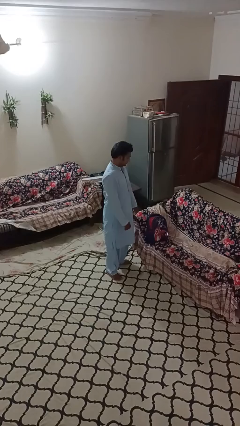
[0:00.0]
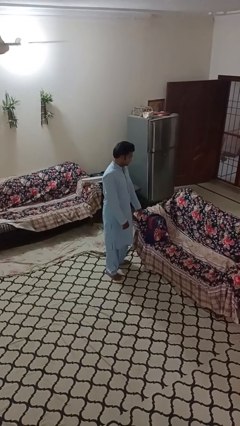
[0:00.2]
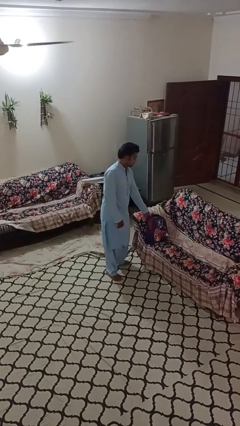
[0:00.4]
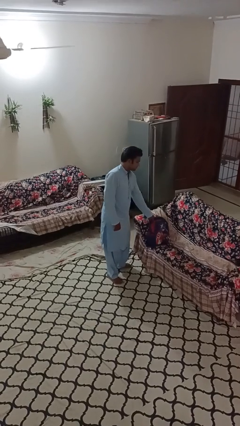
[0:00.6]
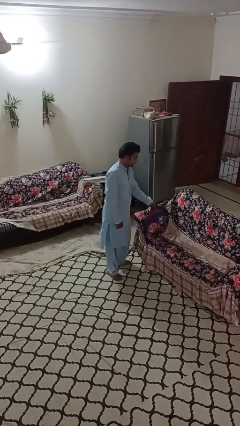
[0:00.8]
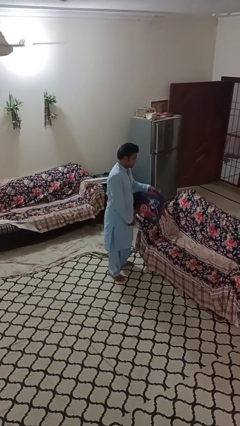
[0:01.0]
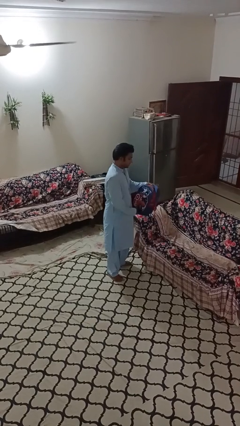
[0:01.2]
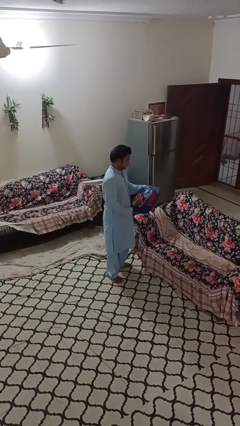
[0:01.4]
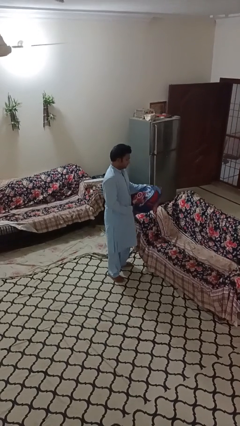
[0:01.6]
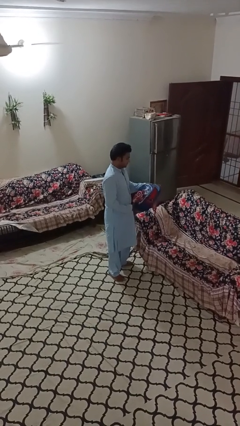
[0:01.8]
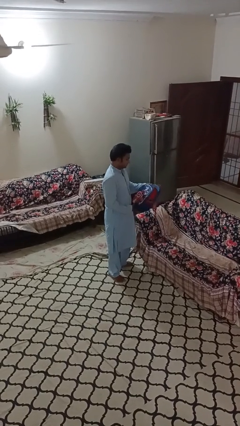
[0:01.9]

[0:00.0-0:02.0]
person picks up object from couch

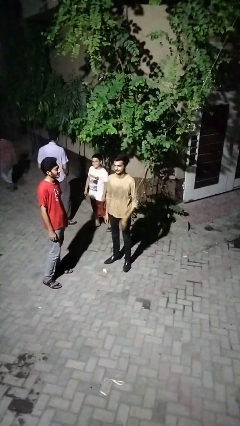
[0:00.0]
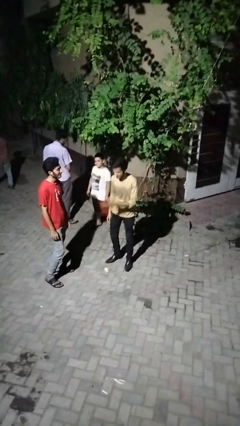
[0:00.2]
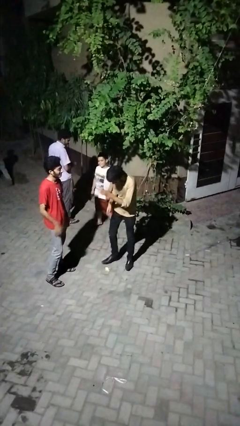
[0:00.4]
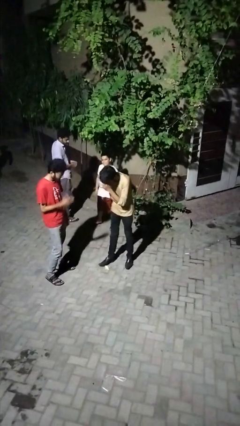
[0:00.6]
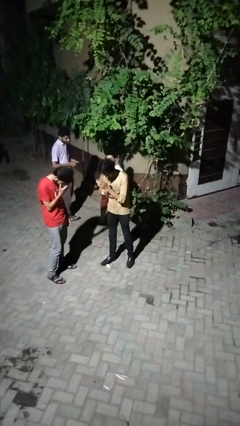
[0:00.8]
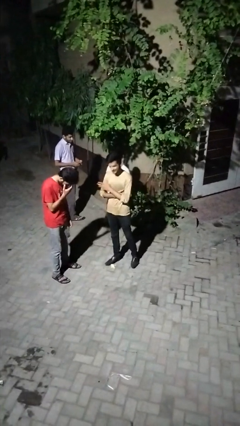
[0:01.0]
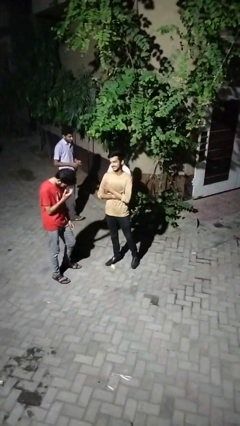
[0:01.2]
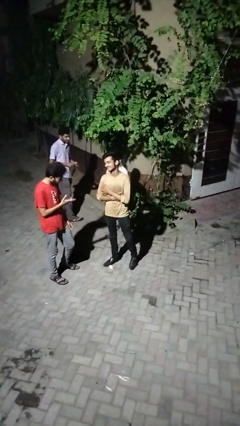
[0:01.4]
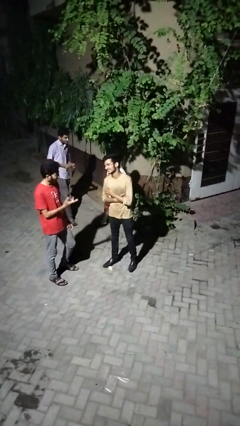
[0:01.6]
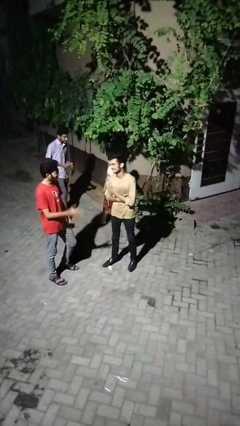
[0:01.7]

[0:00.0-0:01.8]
person laughs with person

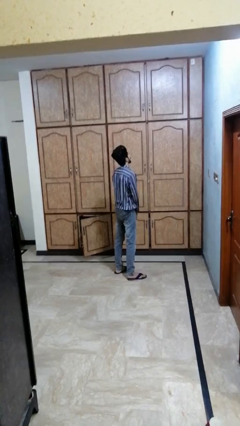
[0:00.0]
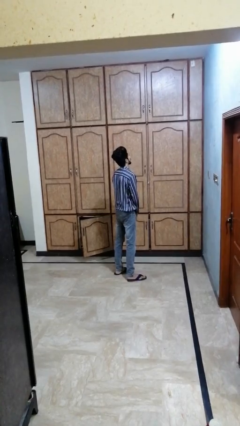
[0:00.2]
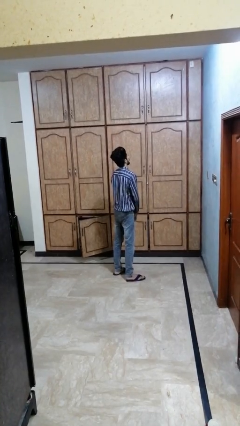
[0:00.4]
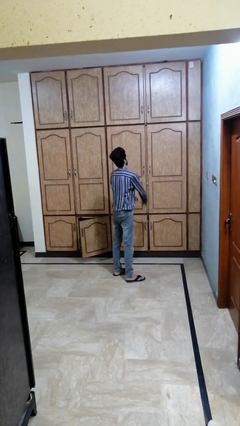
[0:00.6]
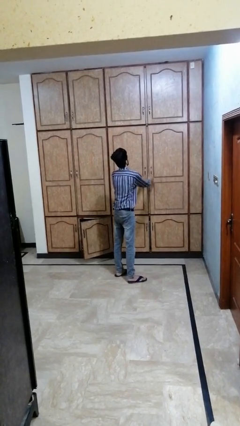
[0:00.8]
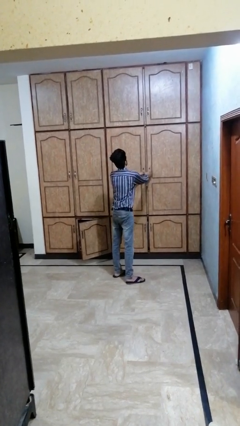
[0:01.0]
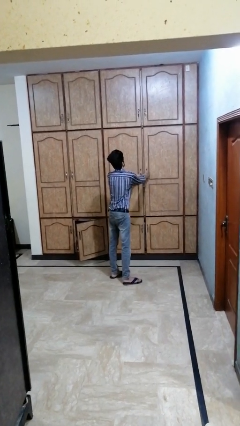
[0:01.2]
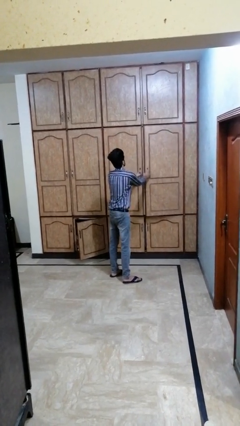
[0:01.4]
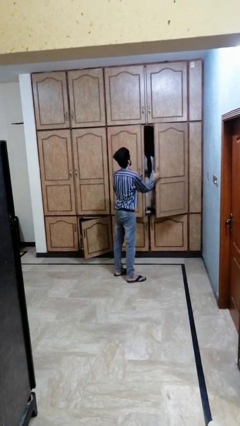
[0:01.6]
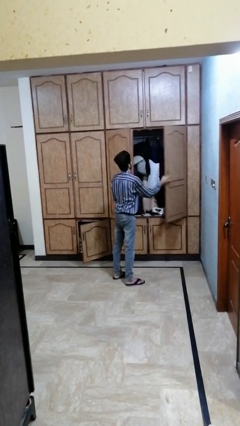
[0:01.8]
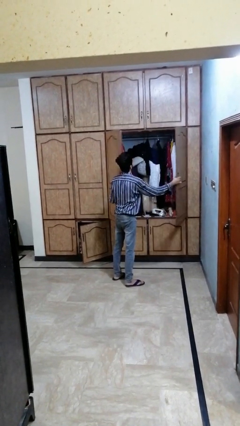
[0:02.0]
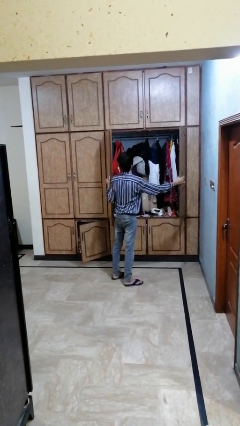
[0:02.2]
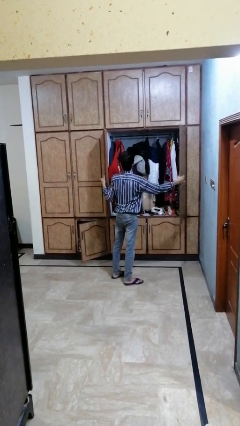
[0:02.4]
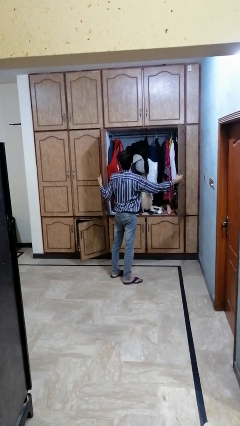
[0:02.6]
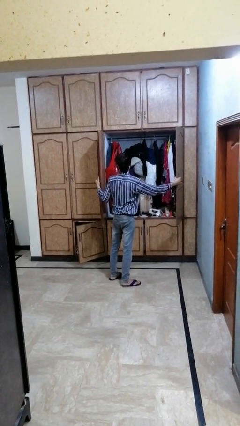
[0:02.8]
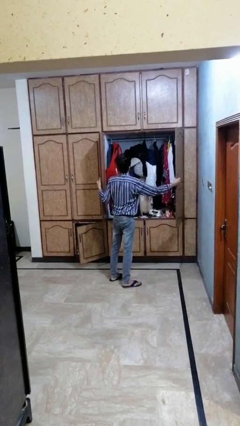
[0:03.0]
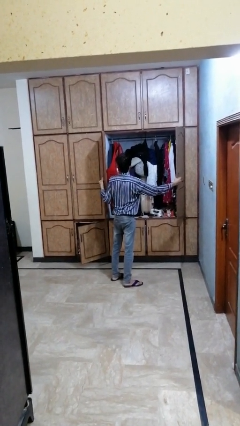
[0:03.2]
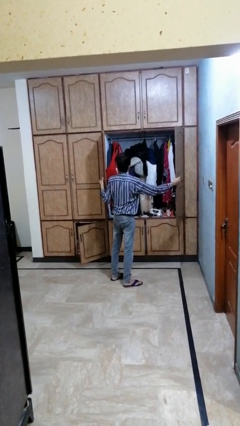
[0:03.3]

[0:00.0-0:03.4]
person opens dresser drawer

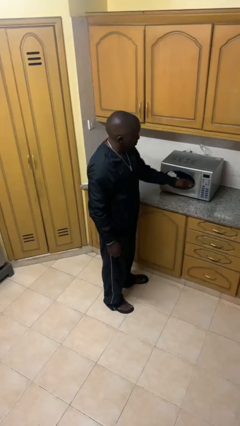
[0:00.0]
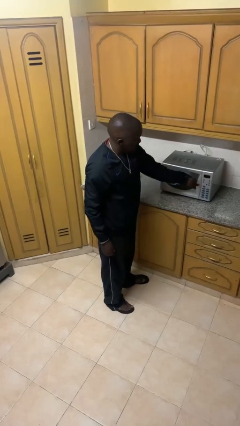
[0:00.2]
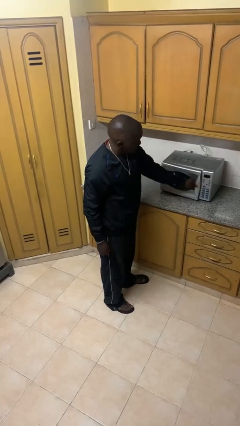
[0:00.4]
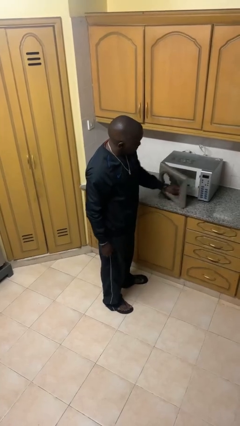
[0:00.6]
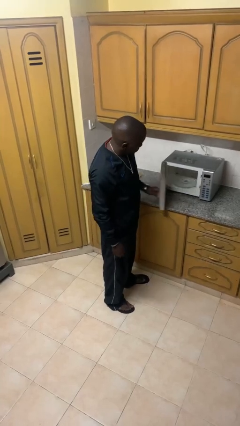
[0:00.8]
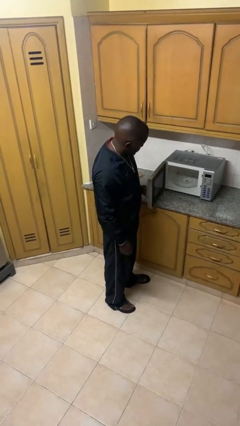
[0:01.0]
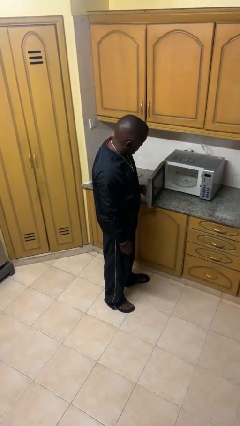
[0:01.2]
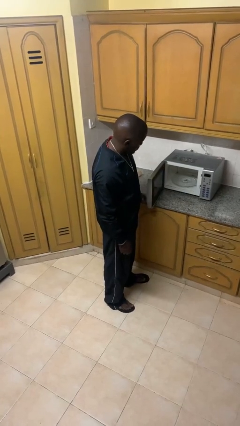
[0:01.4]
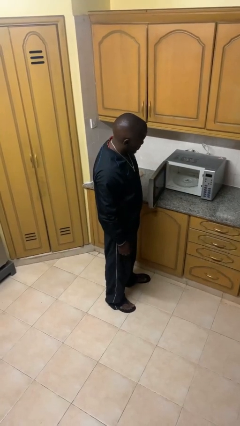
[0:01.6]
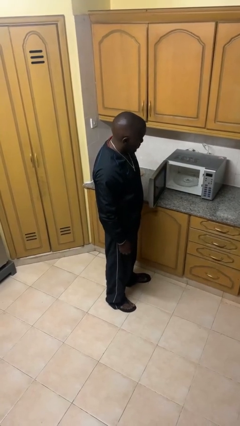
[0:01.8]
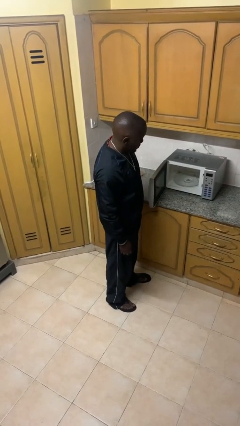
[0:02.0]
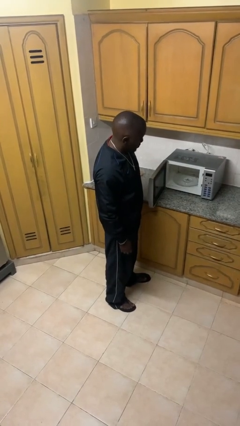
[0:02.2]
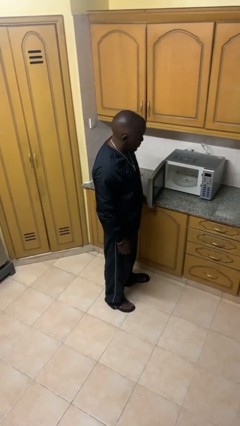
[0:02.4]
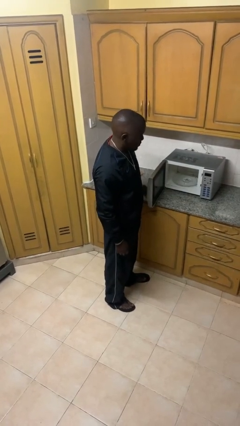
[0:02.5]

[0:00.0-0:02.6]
person opens microwave

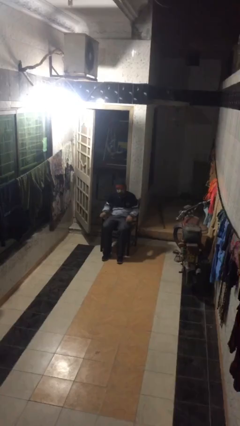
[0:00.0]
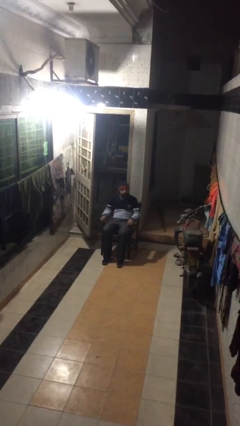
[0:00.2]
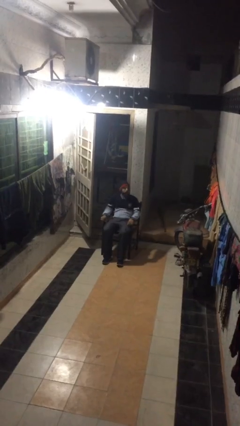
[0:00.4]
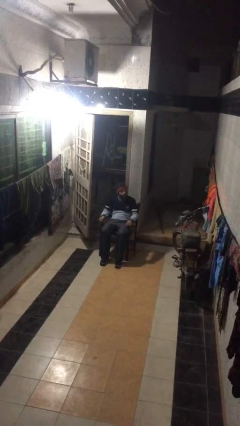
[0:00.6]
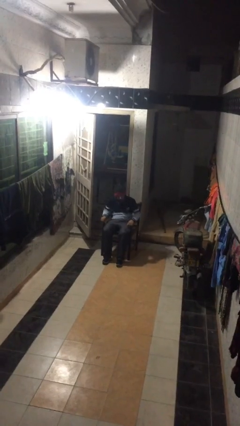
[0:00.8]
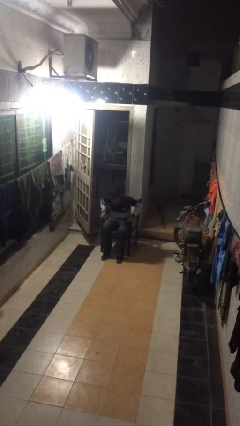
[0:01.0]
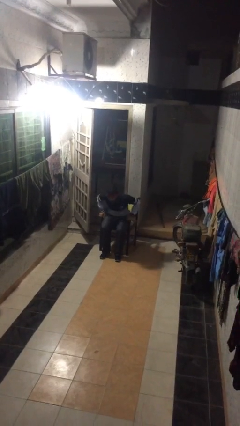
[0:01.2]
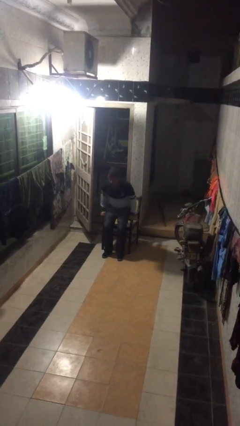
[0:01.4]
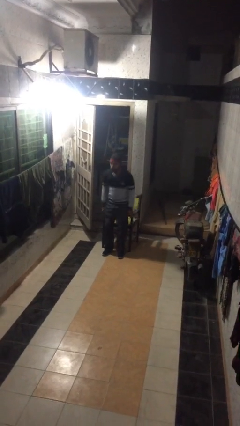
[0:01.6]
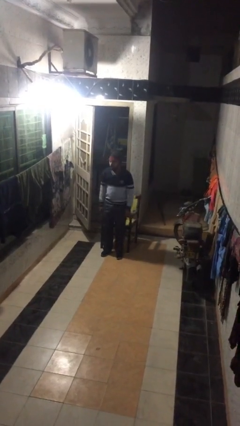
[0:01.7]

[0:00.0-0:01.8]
person stands up

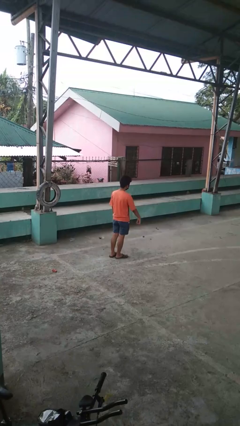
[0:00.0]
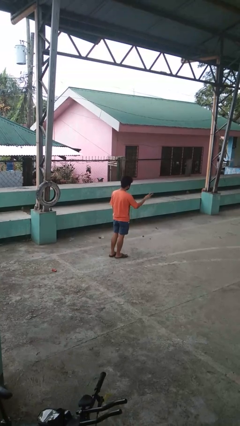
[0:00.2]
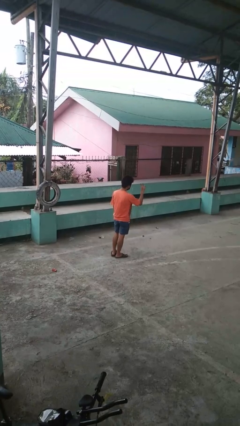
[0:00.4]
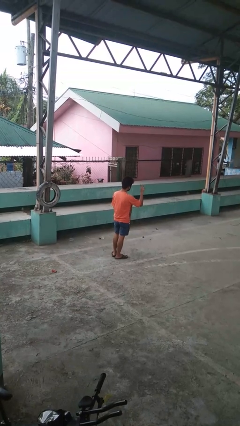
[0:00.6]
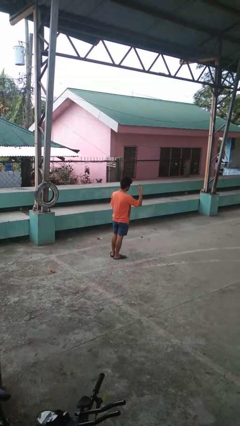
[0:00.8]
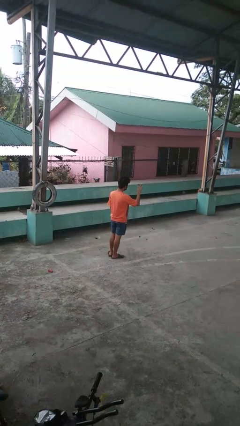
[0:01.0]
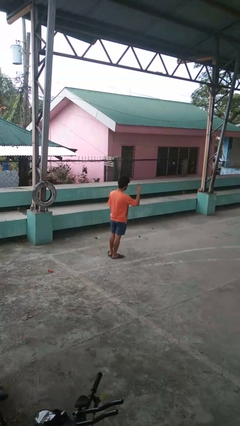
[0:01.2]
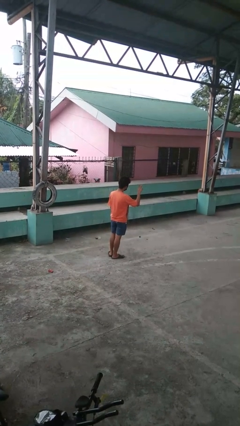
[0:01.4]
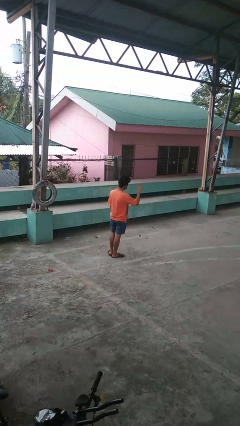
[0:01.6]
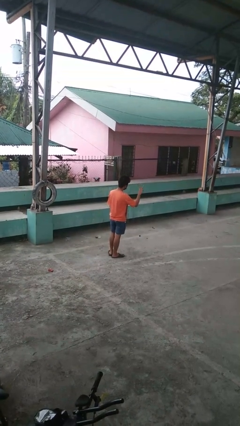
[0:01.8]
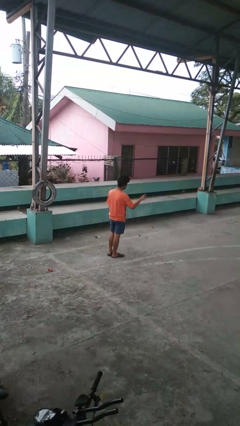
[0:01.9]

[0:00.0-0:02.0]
person gestures peace

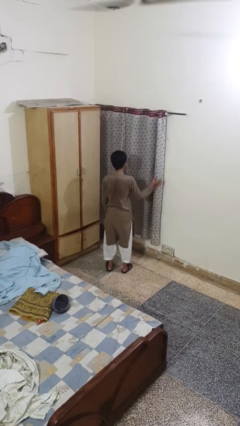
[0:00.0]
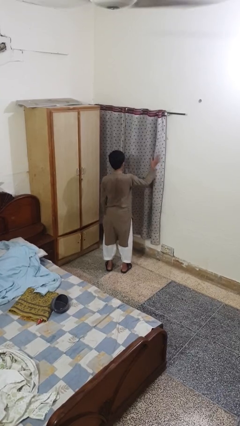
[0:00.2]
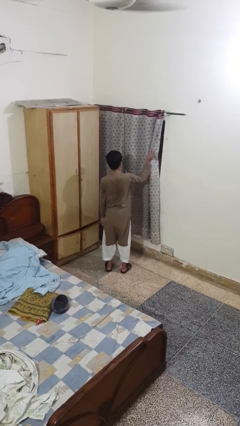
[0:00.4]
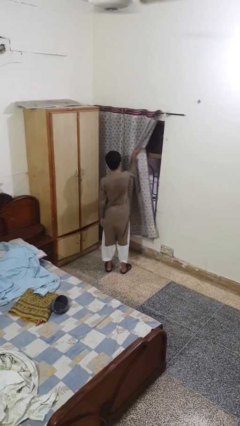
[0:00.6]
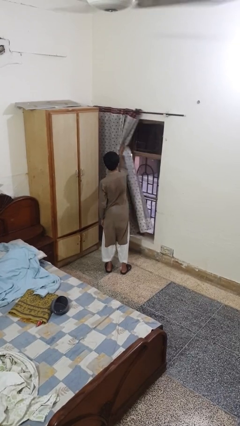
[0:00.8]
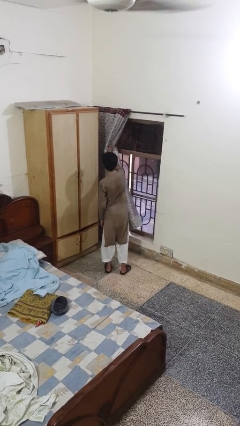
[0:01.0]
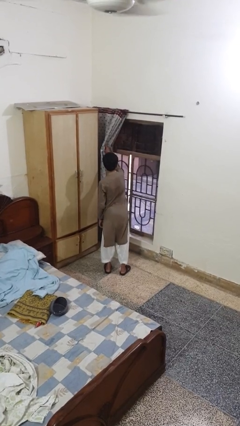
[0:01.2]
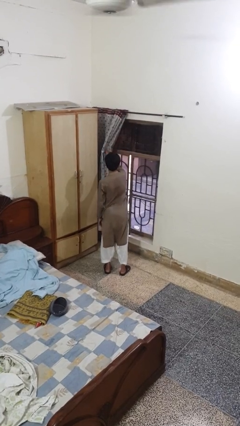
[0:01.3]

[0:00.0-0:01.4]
person opens curtains

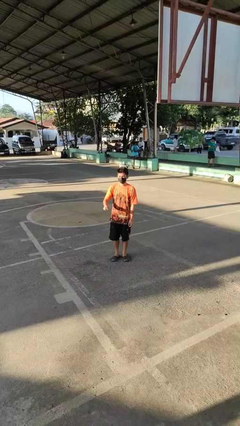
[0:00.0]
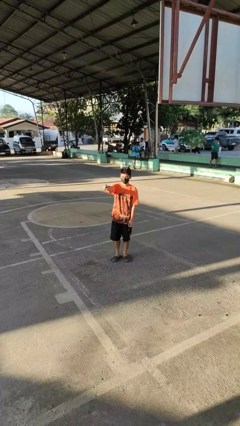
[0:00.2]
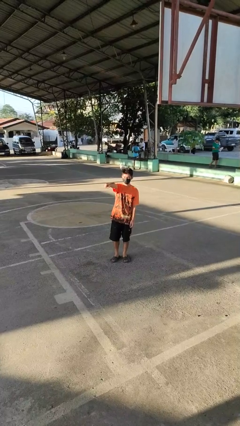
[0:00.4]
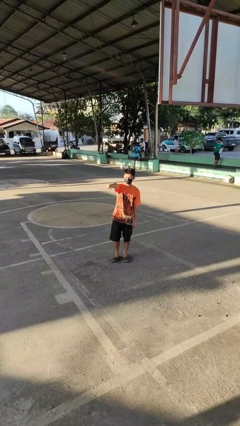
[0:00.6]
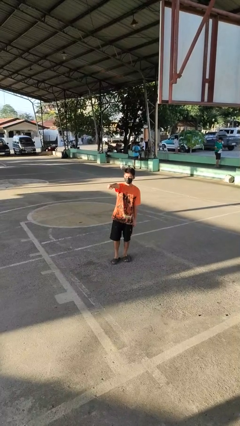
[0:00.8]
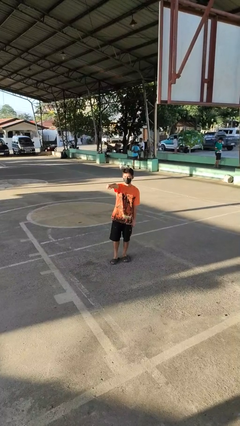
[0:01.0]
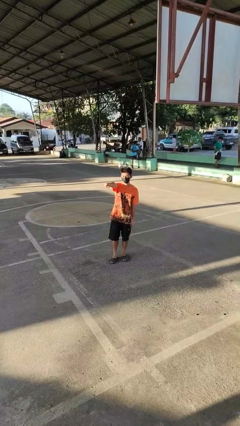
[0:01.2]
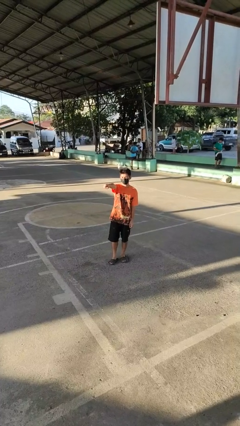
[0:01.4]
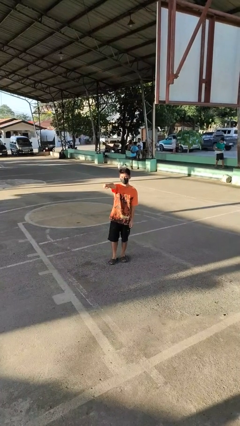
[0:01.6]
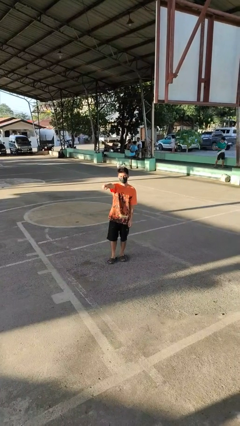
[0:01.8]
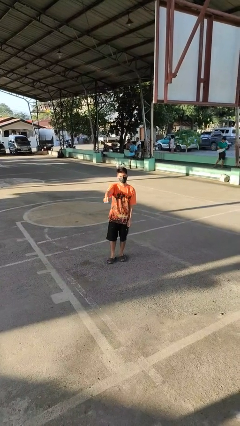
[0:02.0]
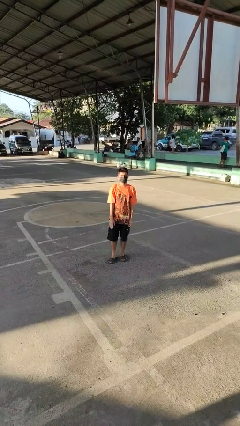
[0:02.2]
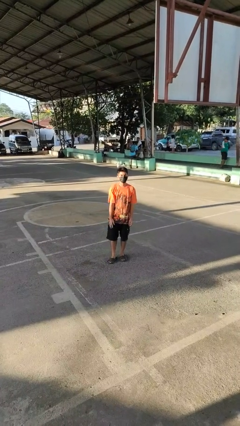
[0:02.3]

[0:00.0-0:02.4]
person points at person
